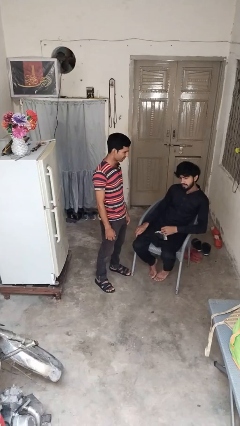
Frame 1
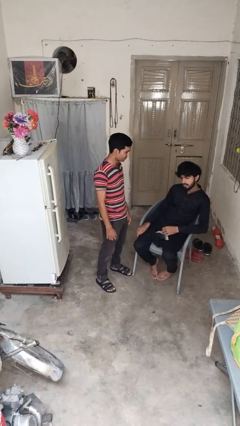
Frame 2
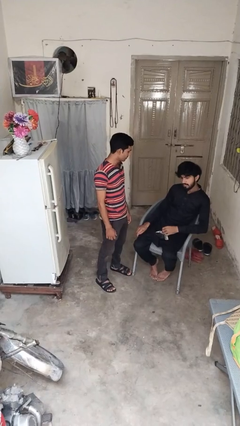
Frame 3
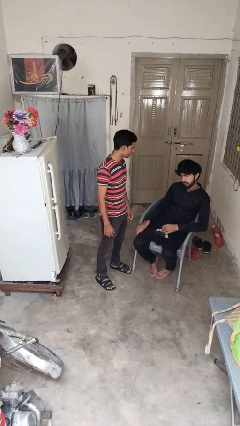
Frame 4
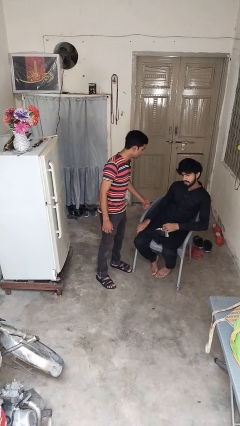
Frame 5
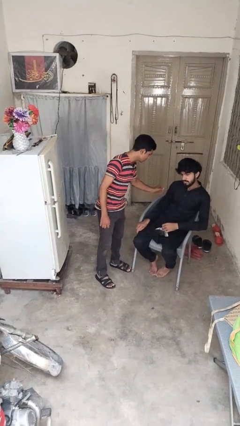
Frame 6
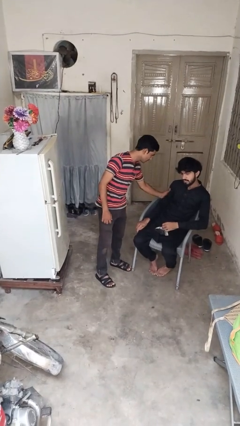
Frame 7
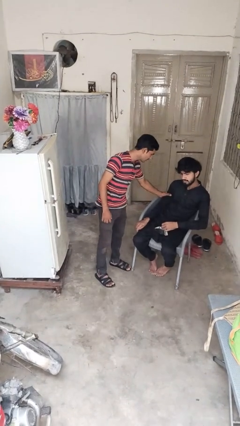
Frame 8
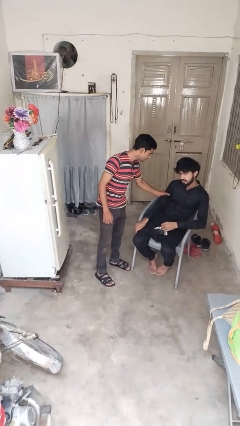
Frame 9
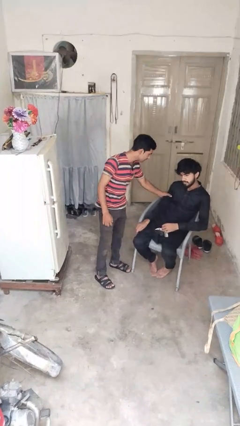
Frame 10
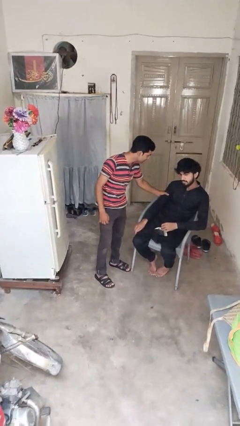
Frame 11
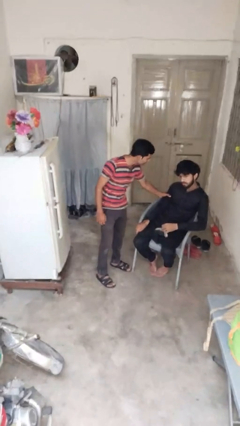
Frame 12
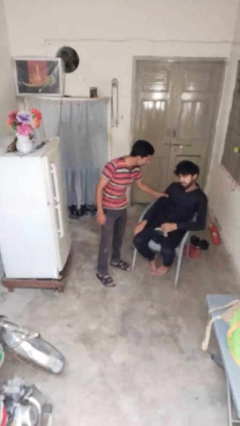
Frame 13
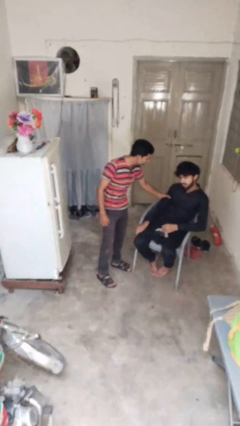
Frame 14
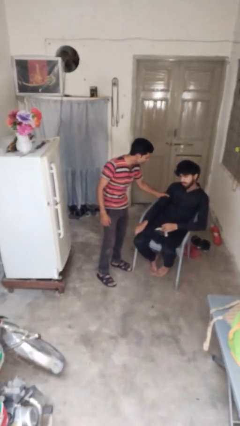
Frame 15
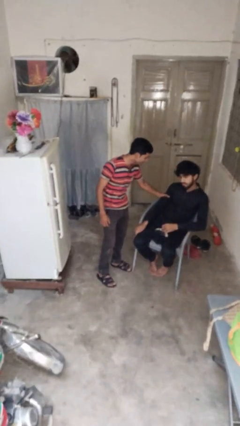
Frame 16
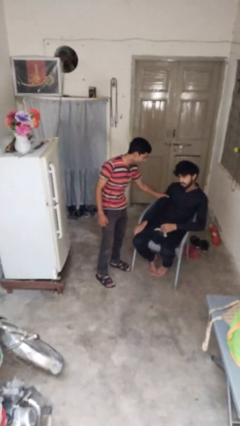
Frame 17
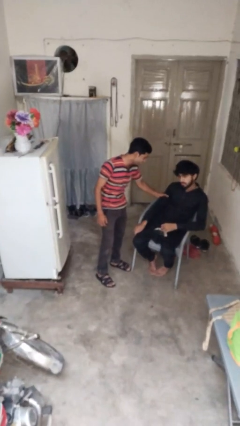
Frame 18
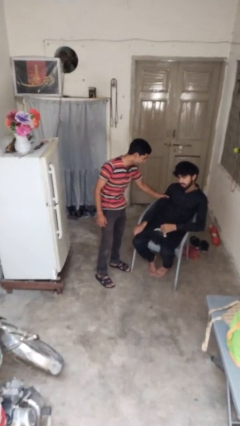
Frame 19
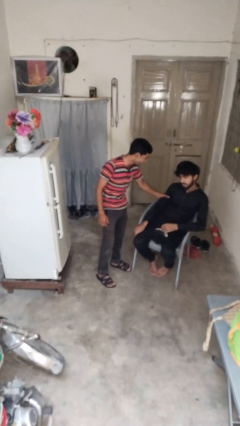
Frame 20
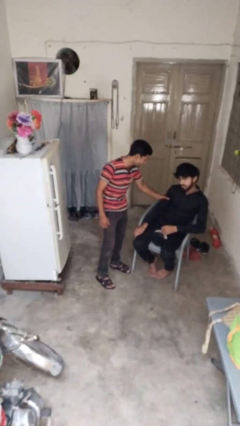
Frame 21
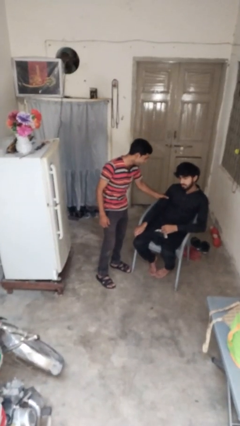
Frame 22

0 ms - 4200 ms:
person grabs person by bicep

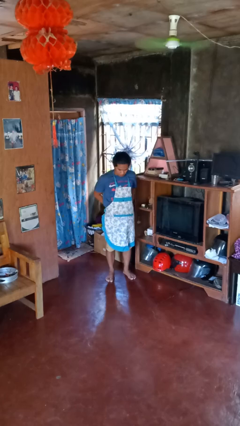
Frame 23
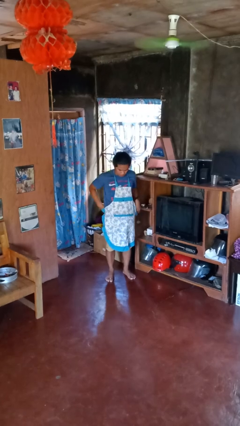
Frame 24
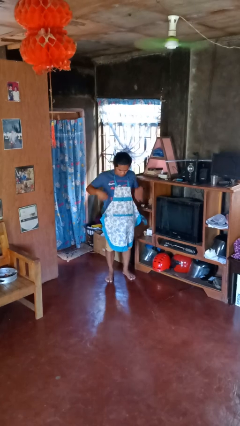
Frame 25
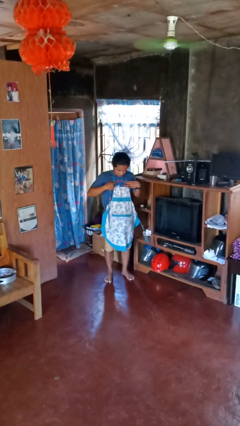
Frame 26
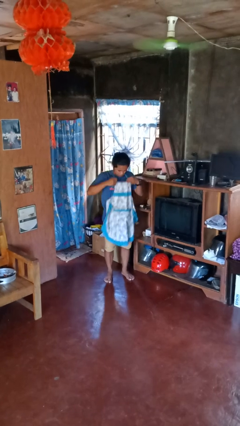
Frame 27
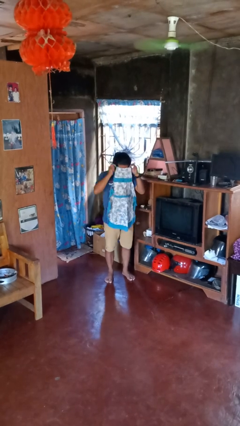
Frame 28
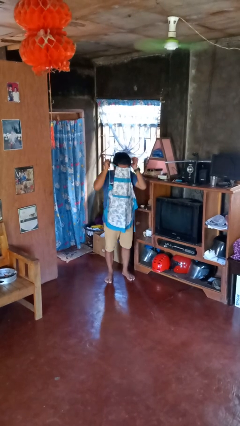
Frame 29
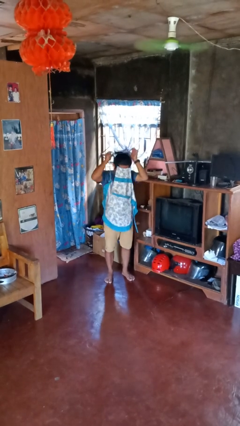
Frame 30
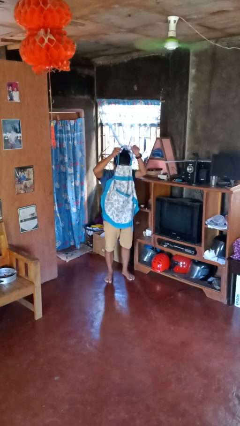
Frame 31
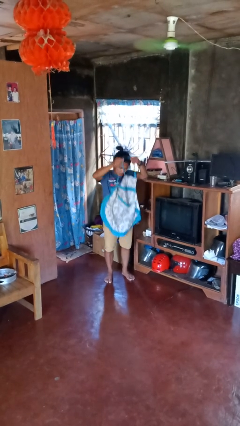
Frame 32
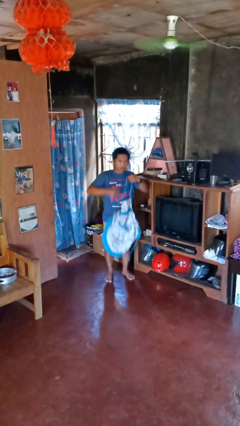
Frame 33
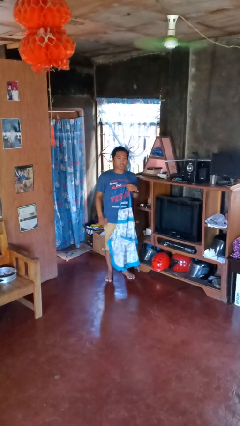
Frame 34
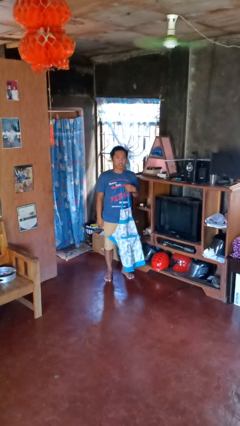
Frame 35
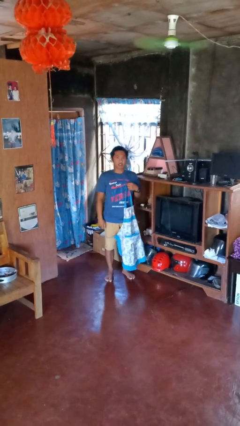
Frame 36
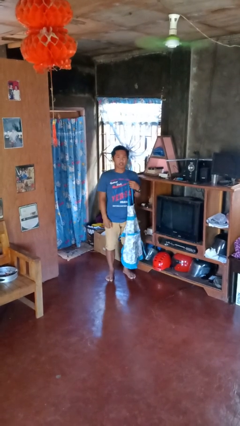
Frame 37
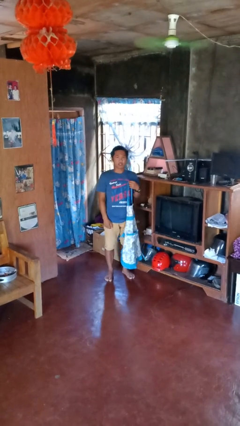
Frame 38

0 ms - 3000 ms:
person takes off apron

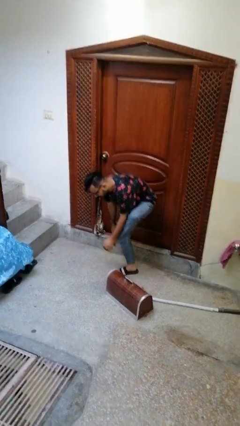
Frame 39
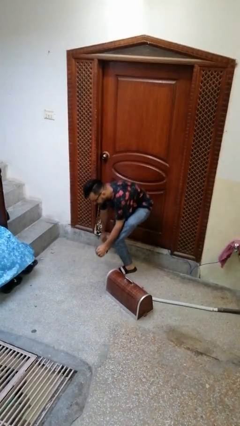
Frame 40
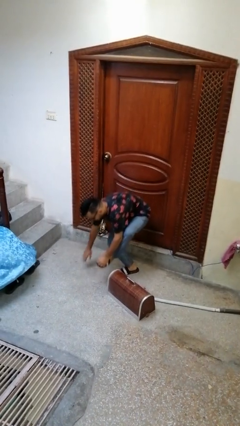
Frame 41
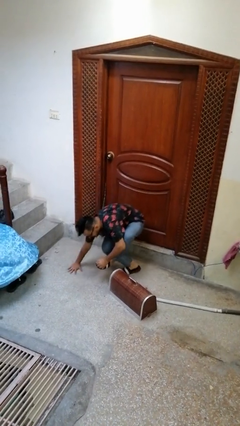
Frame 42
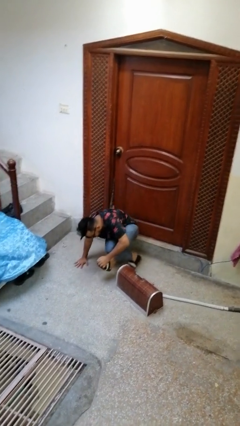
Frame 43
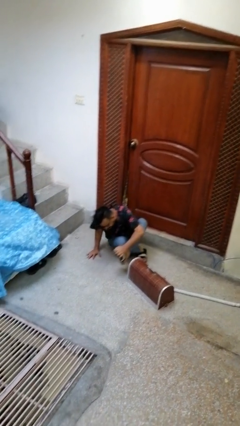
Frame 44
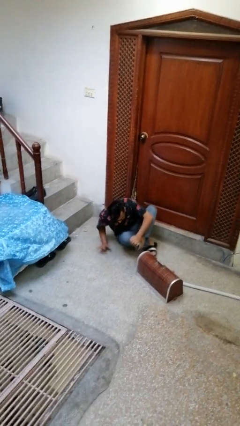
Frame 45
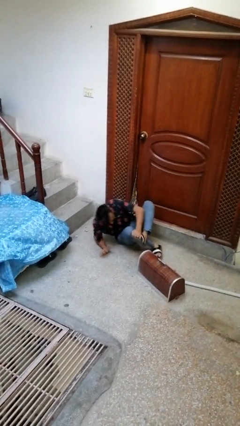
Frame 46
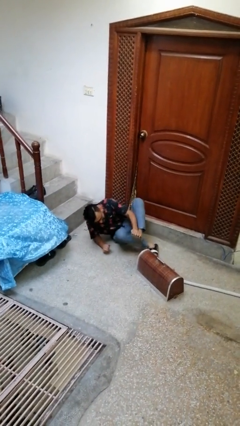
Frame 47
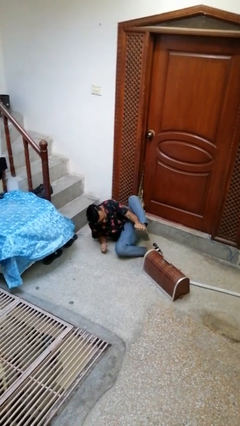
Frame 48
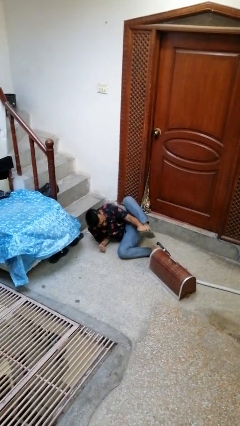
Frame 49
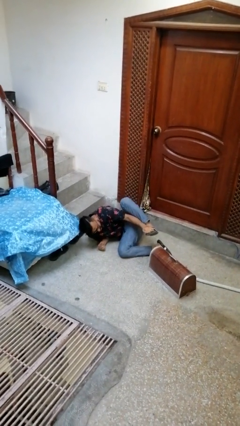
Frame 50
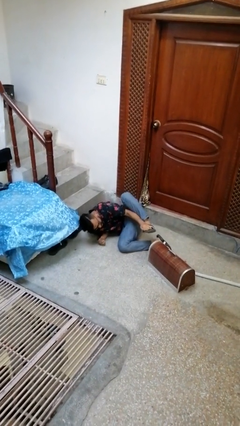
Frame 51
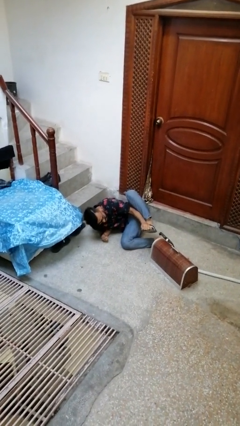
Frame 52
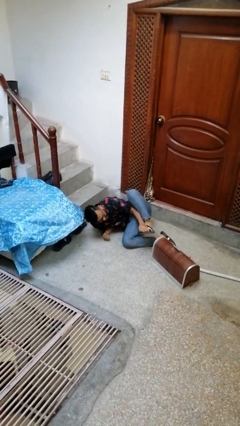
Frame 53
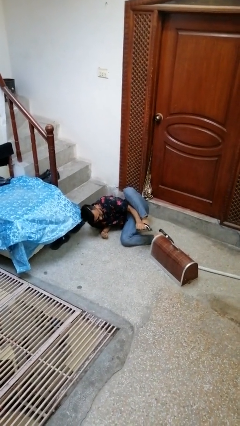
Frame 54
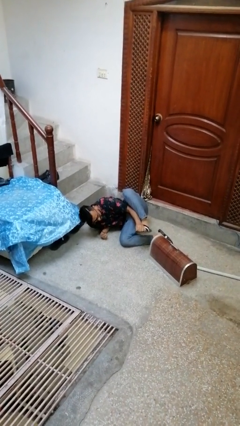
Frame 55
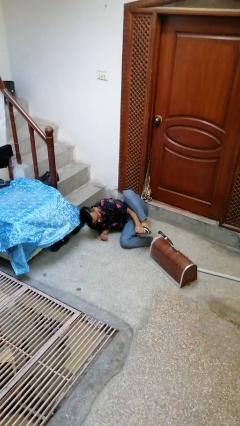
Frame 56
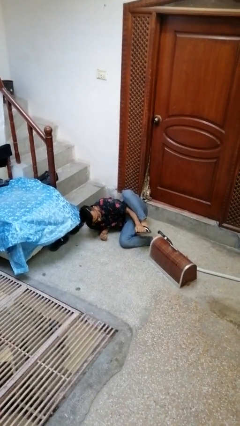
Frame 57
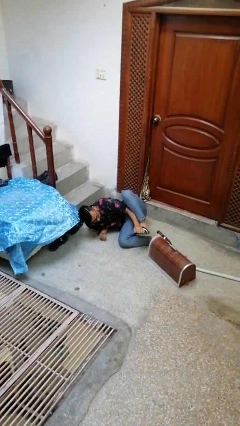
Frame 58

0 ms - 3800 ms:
person lies down on floor

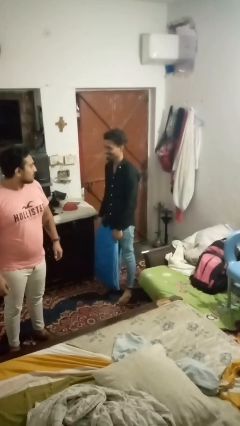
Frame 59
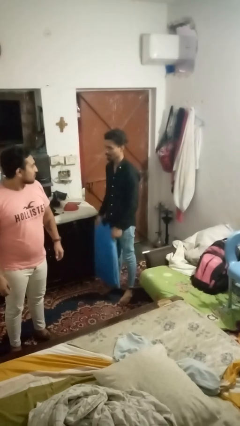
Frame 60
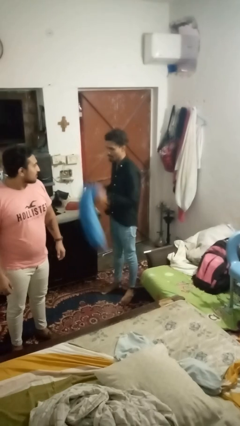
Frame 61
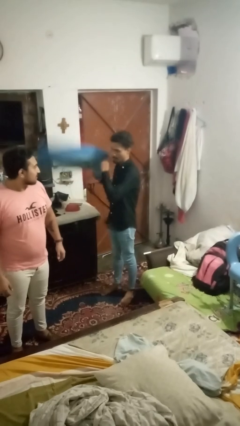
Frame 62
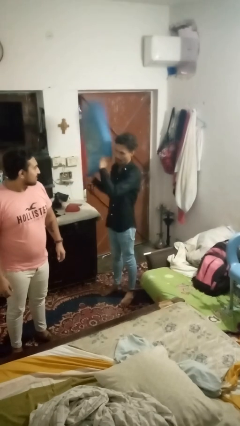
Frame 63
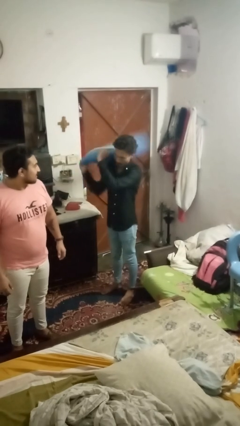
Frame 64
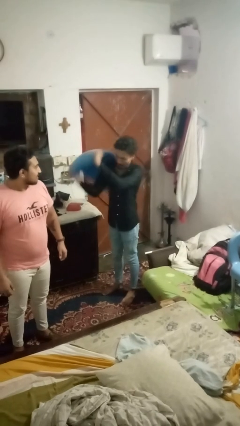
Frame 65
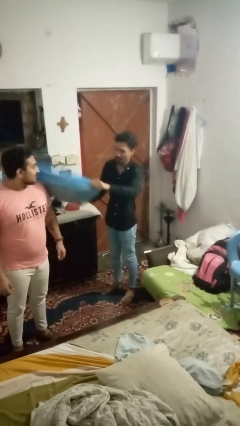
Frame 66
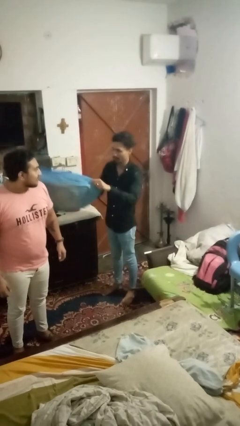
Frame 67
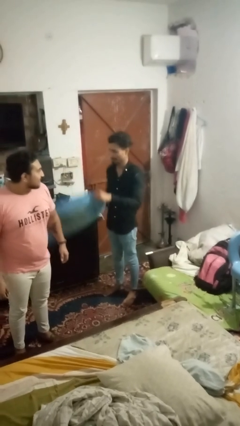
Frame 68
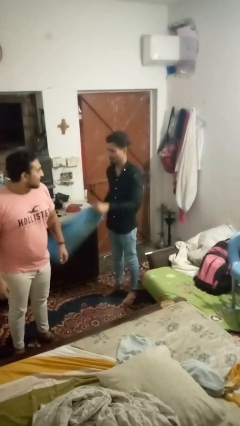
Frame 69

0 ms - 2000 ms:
person hits person with pillow

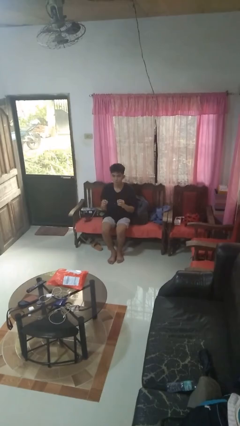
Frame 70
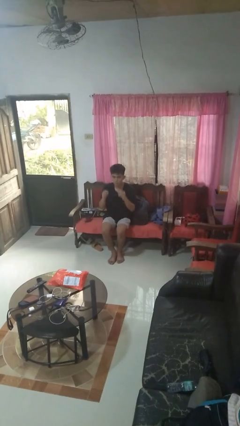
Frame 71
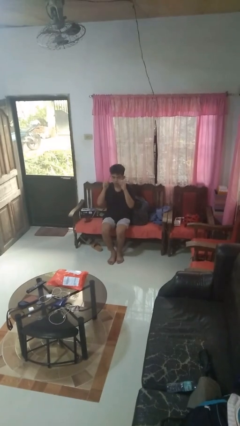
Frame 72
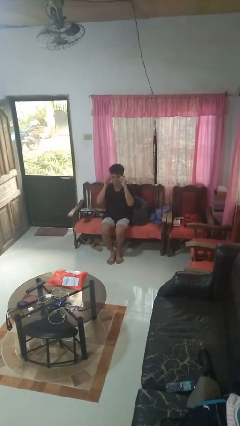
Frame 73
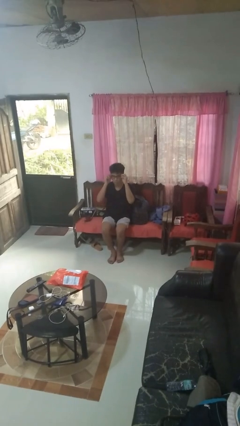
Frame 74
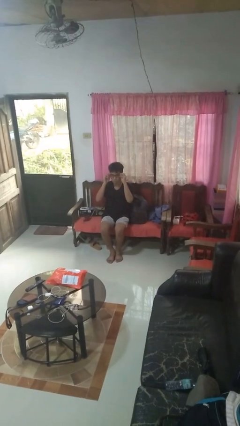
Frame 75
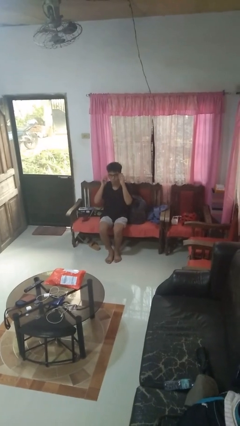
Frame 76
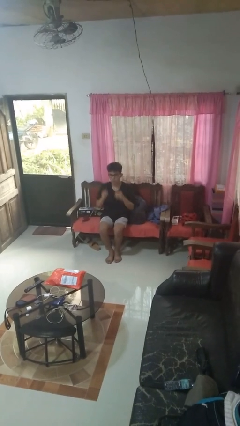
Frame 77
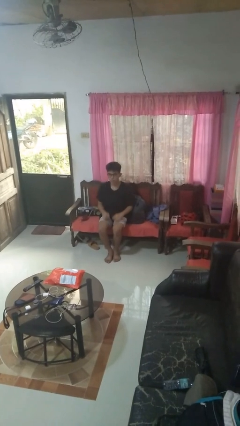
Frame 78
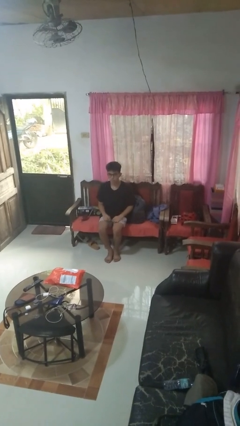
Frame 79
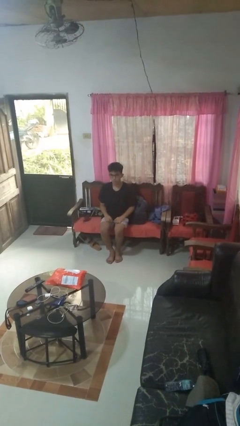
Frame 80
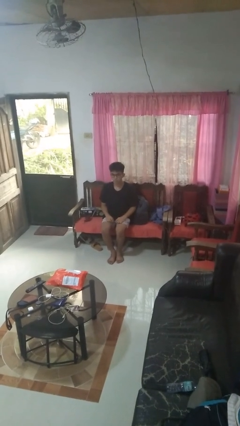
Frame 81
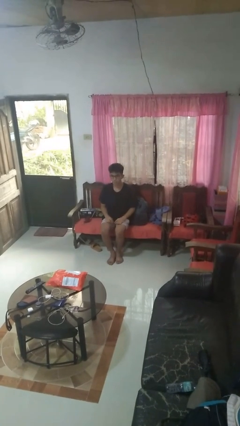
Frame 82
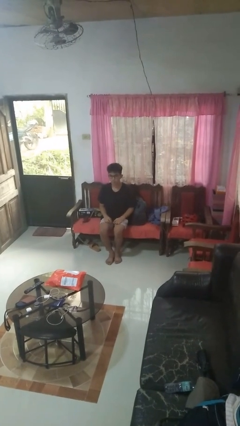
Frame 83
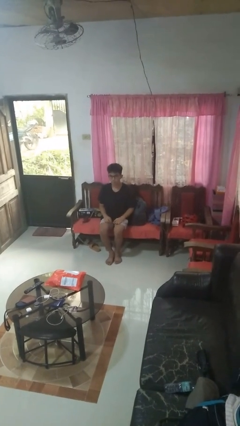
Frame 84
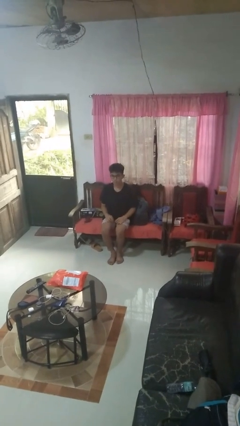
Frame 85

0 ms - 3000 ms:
person puts on glasses

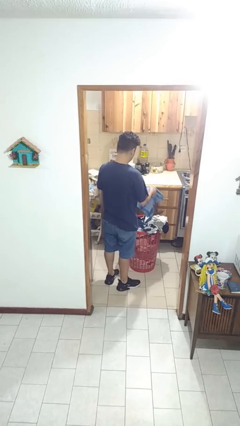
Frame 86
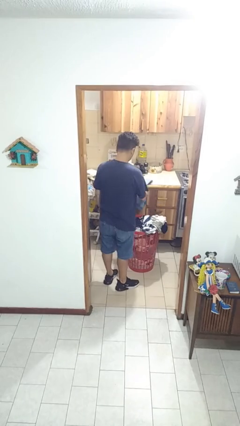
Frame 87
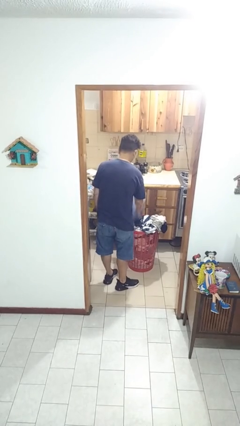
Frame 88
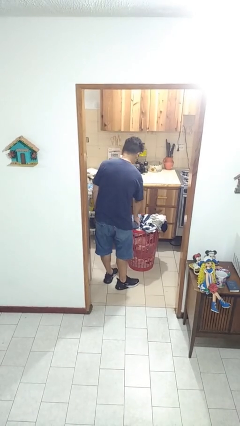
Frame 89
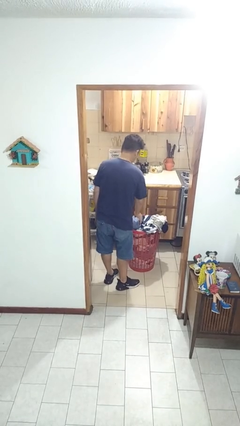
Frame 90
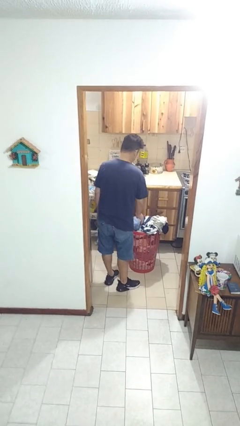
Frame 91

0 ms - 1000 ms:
person puts object into basket

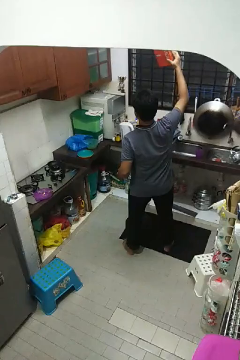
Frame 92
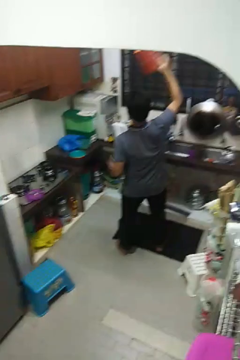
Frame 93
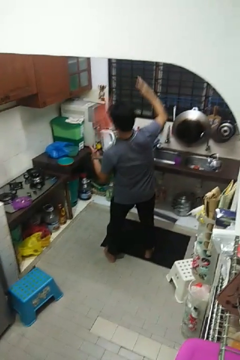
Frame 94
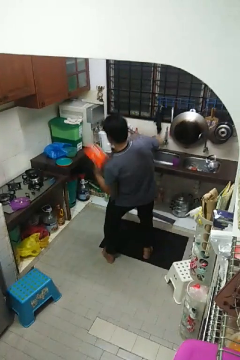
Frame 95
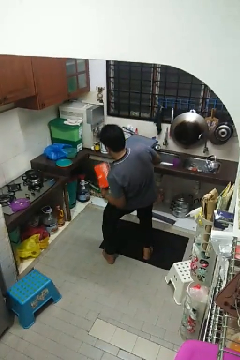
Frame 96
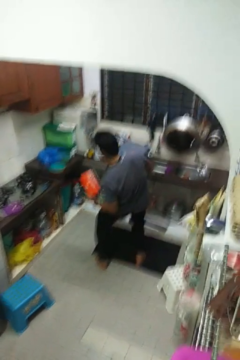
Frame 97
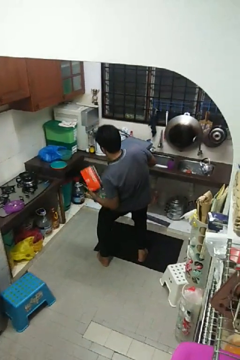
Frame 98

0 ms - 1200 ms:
person drops object
